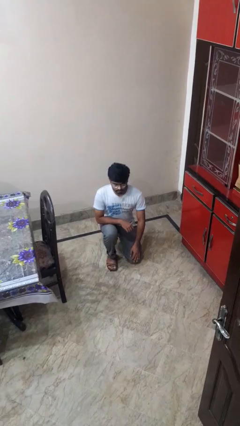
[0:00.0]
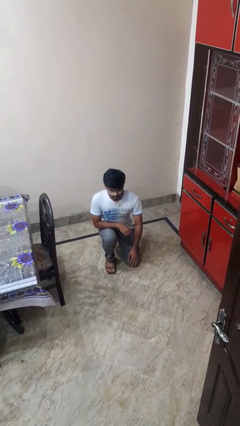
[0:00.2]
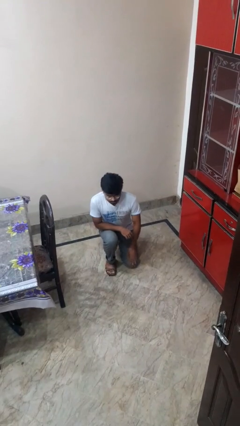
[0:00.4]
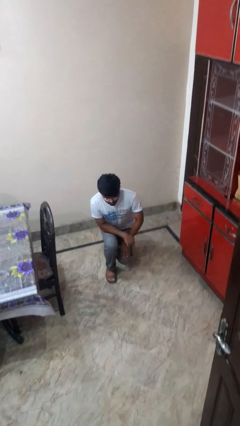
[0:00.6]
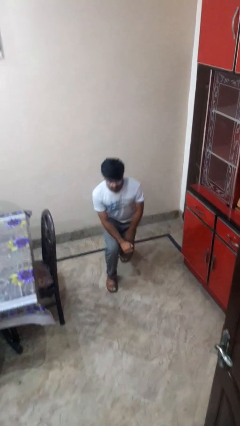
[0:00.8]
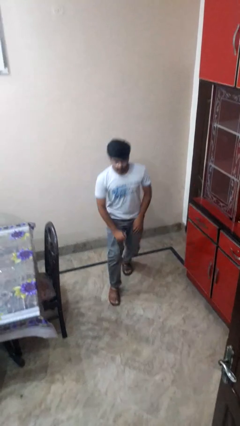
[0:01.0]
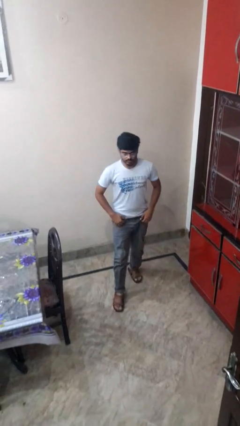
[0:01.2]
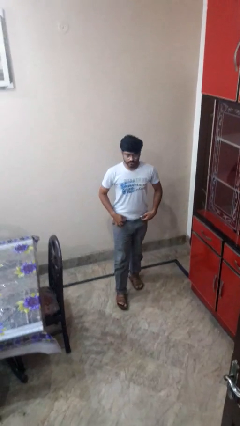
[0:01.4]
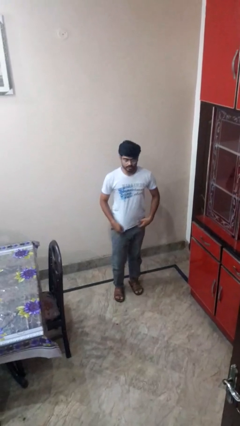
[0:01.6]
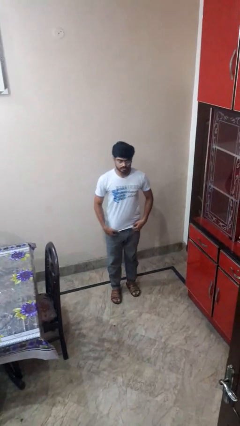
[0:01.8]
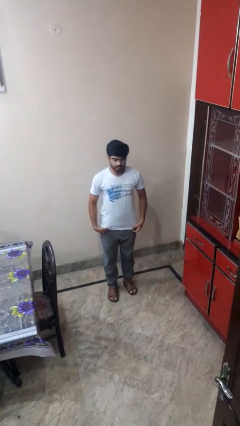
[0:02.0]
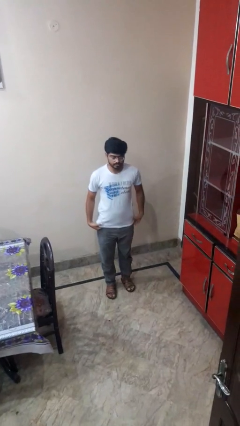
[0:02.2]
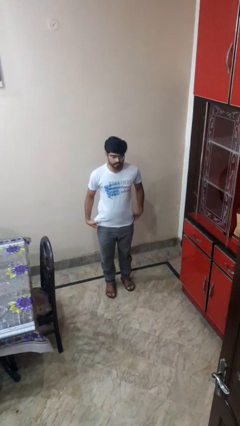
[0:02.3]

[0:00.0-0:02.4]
person stands up from floor

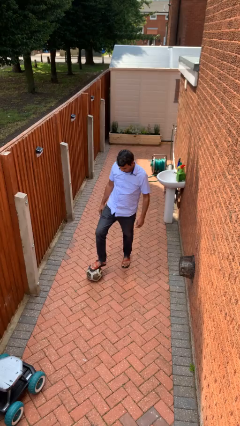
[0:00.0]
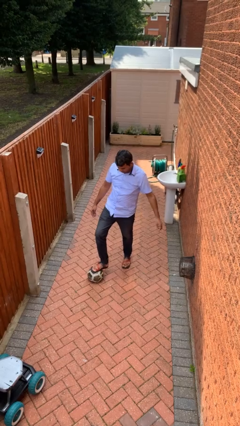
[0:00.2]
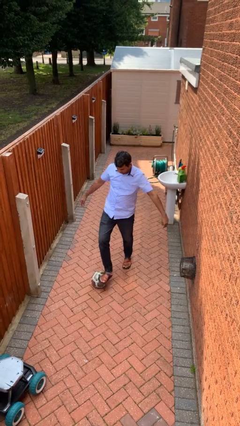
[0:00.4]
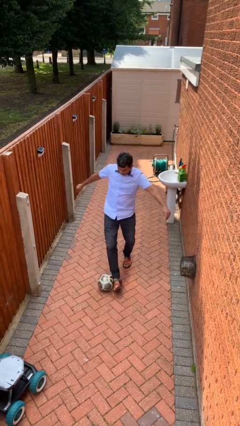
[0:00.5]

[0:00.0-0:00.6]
person trips on object on floor

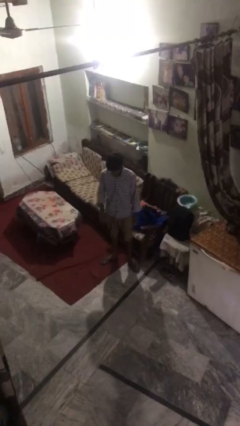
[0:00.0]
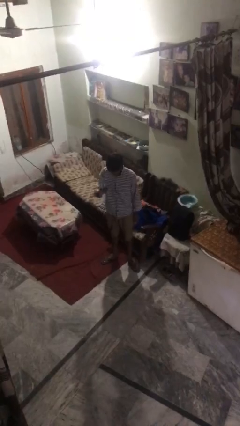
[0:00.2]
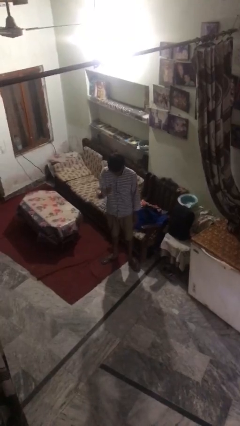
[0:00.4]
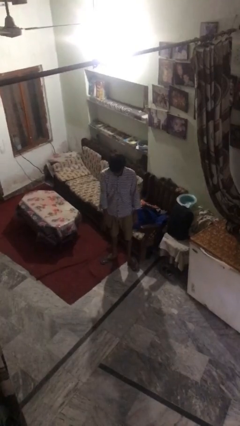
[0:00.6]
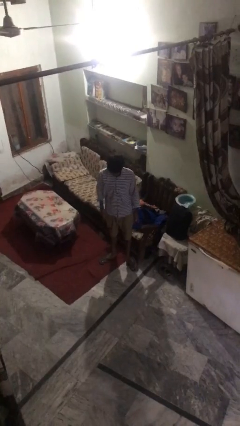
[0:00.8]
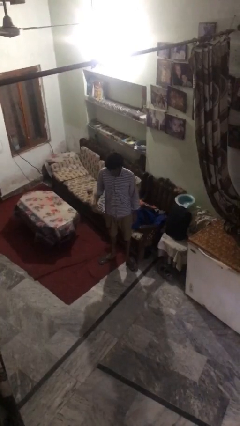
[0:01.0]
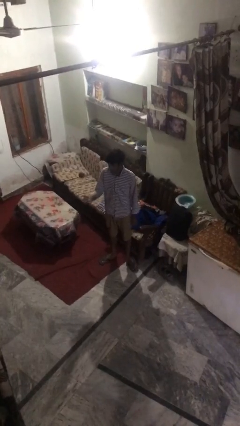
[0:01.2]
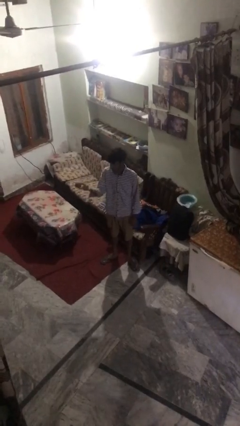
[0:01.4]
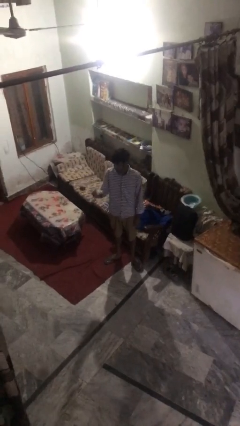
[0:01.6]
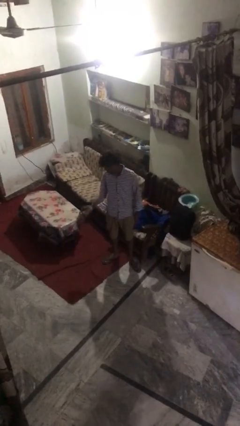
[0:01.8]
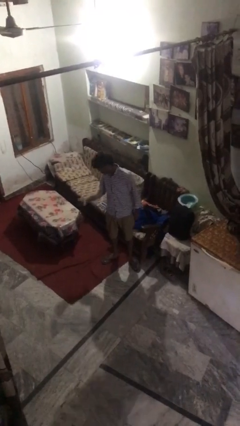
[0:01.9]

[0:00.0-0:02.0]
person bounces ball on floor

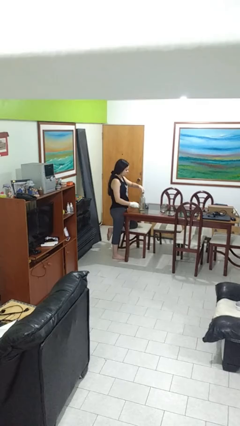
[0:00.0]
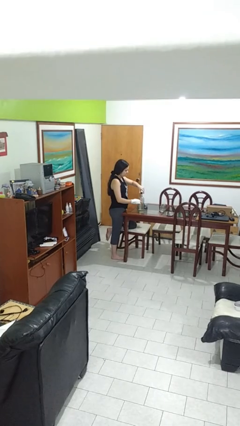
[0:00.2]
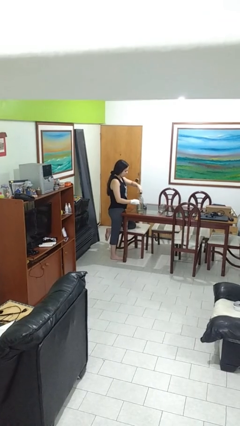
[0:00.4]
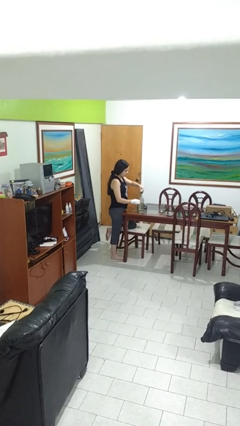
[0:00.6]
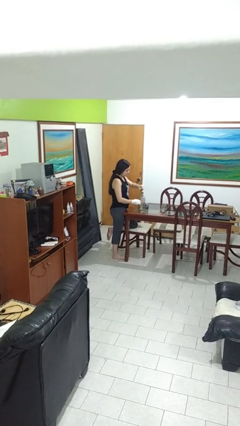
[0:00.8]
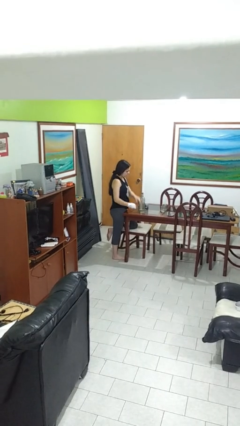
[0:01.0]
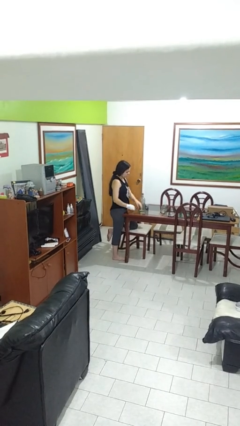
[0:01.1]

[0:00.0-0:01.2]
person unscrews lid from bottle

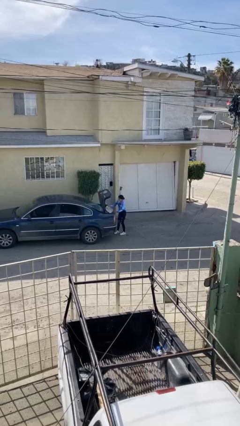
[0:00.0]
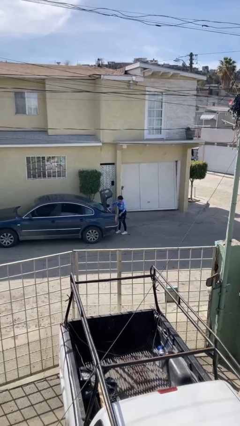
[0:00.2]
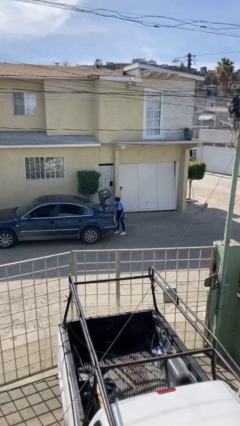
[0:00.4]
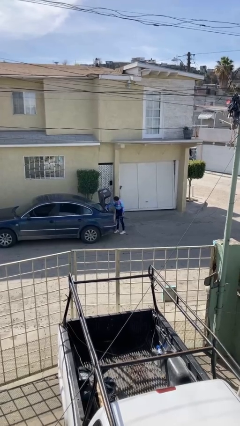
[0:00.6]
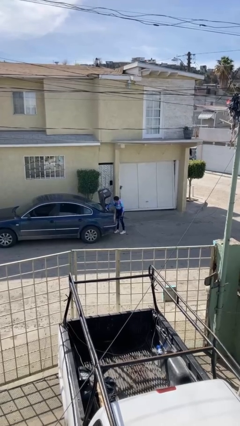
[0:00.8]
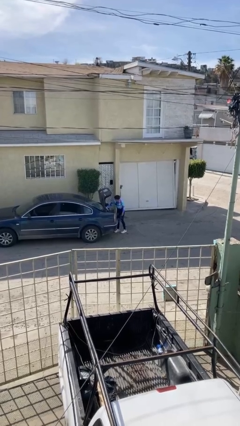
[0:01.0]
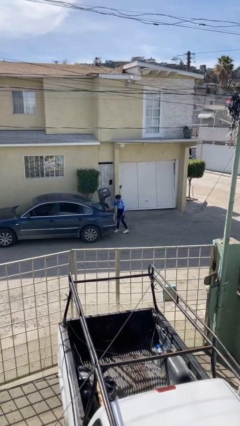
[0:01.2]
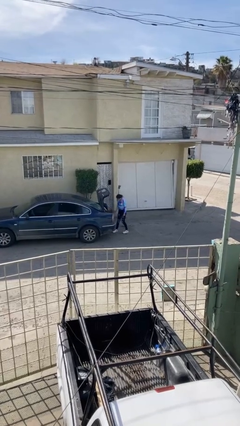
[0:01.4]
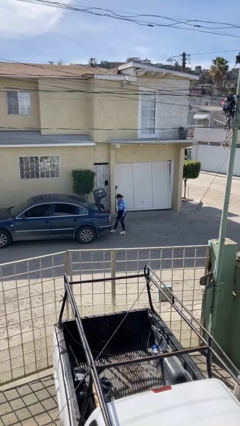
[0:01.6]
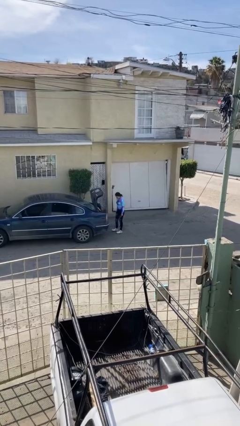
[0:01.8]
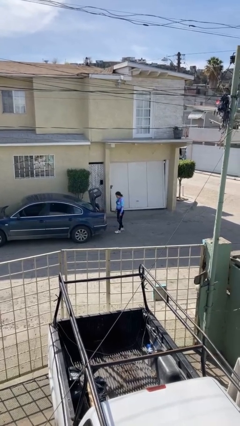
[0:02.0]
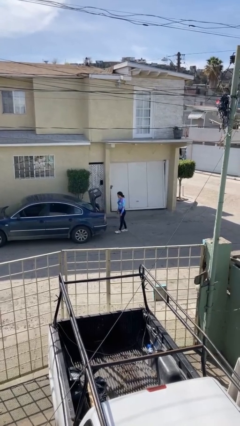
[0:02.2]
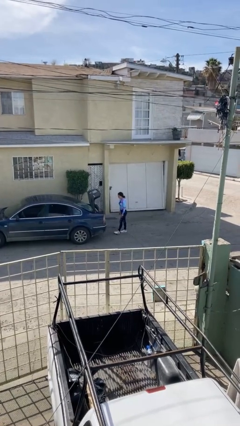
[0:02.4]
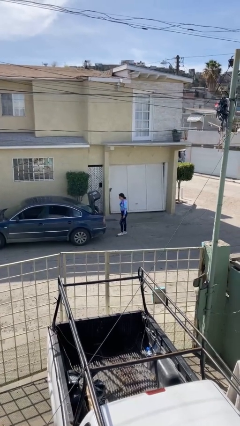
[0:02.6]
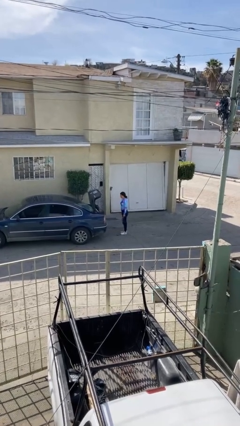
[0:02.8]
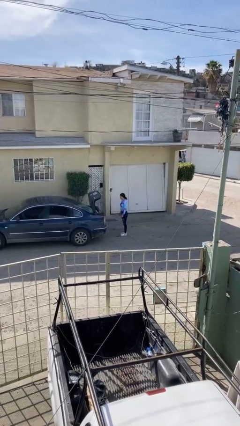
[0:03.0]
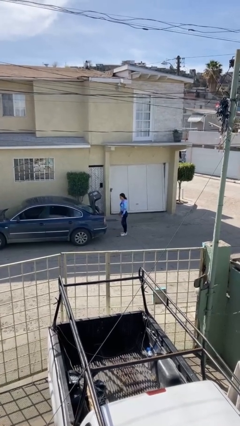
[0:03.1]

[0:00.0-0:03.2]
person loads car

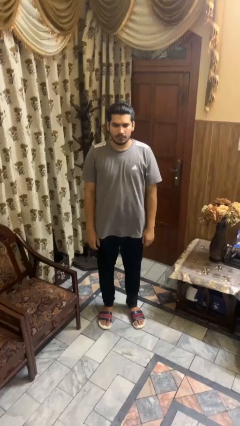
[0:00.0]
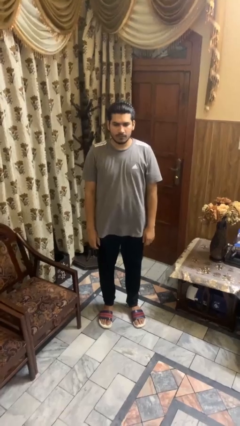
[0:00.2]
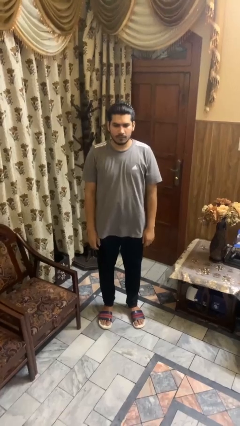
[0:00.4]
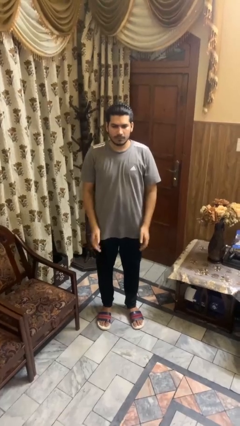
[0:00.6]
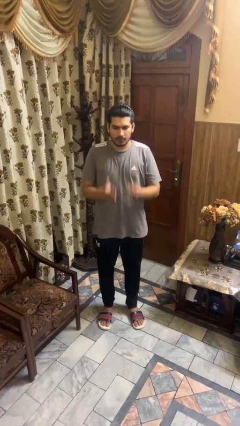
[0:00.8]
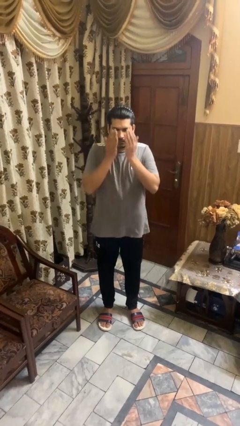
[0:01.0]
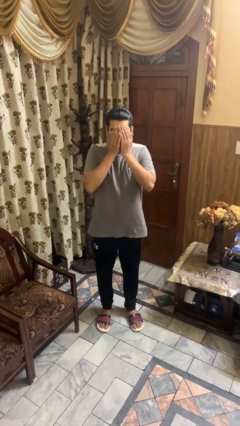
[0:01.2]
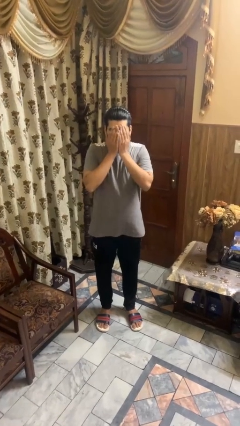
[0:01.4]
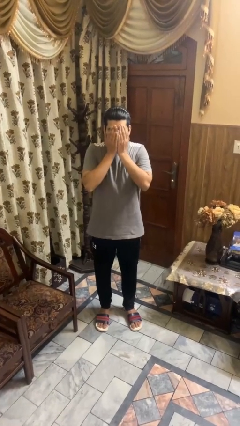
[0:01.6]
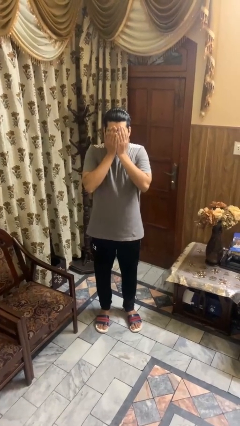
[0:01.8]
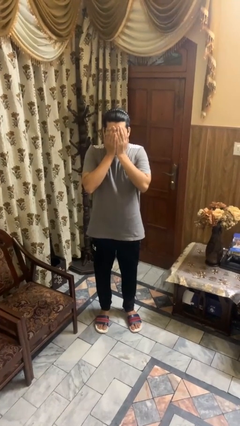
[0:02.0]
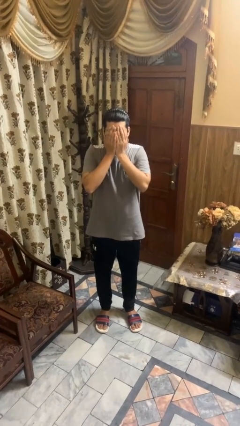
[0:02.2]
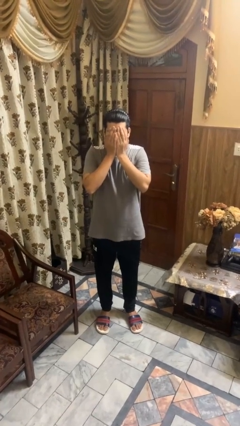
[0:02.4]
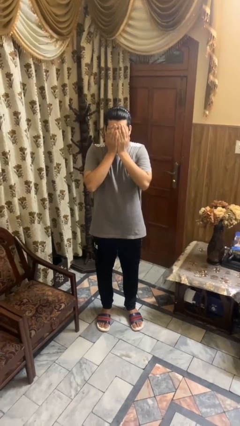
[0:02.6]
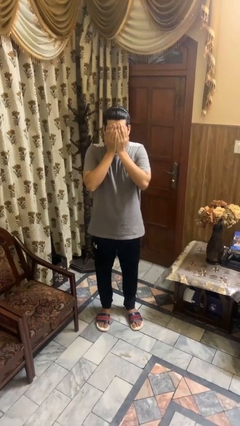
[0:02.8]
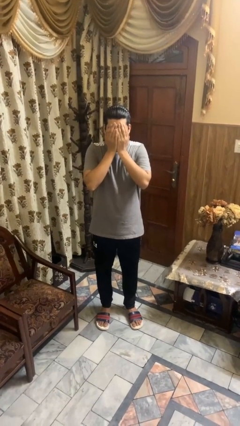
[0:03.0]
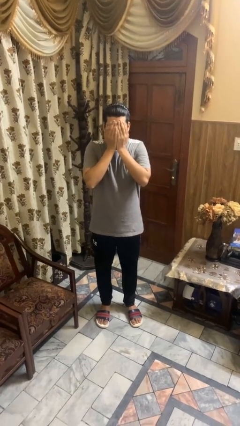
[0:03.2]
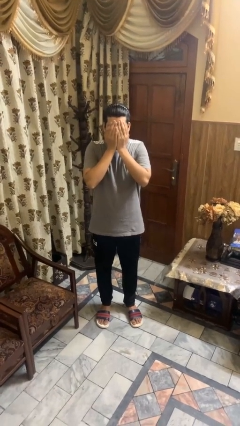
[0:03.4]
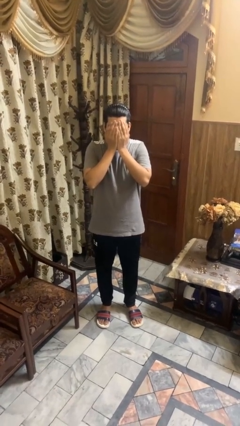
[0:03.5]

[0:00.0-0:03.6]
person covers face with hands

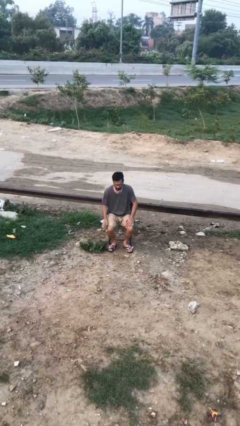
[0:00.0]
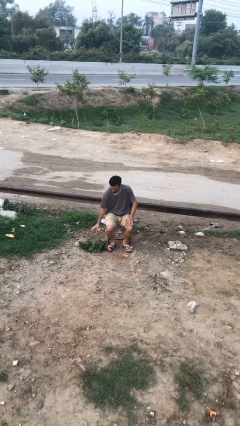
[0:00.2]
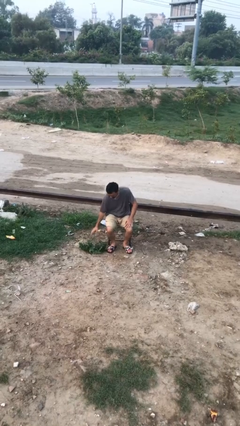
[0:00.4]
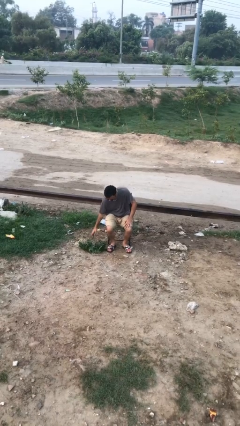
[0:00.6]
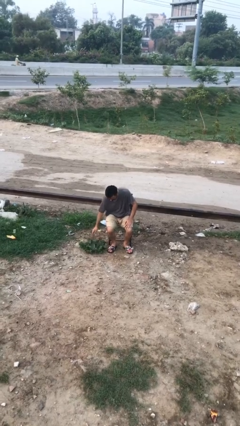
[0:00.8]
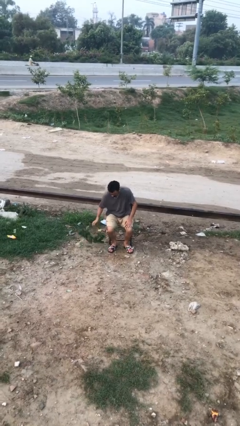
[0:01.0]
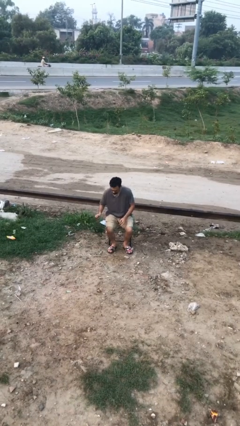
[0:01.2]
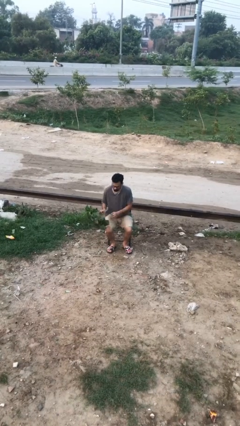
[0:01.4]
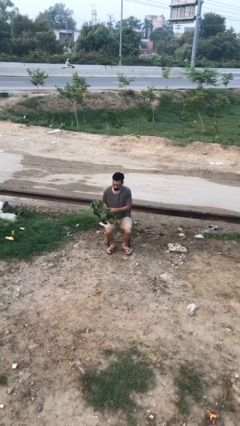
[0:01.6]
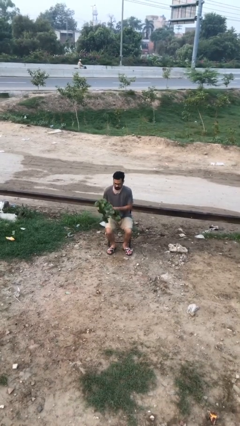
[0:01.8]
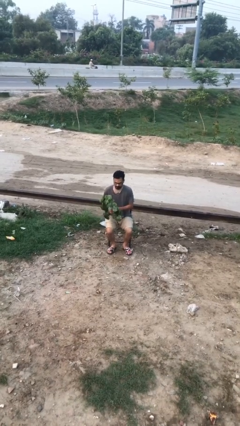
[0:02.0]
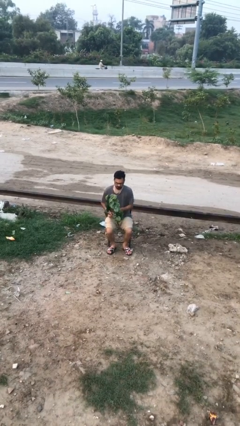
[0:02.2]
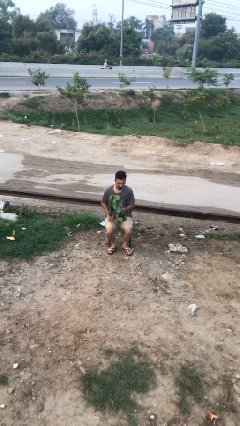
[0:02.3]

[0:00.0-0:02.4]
person picks up object from floor

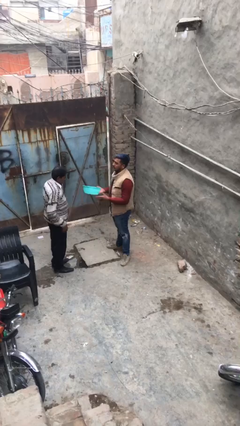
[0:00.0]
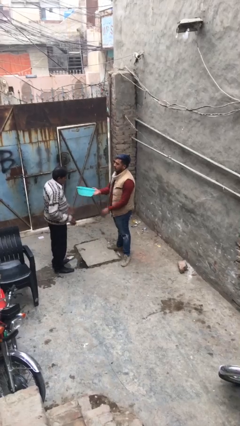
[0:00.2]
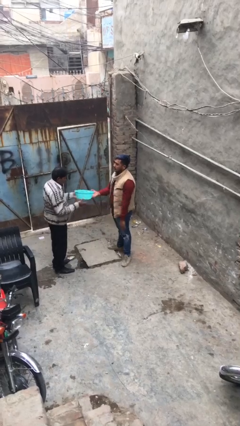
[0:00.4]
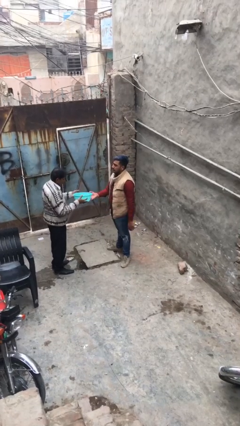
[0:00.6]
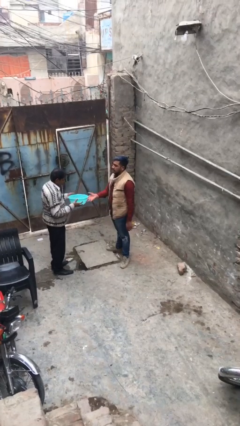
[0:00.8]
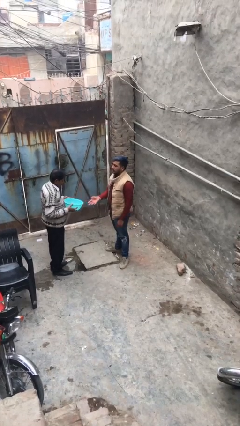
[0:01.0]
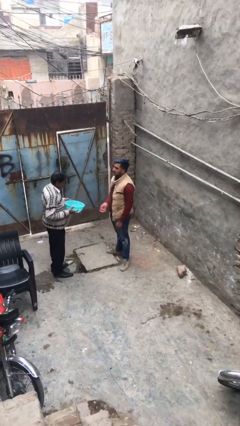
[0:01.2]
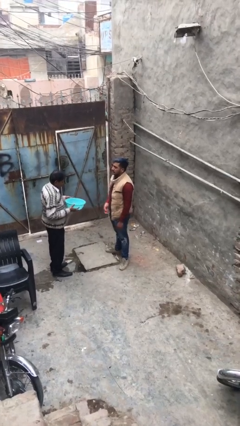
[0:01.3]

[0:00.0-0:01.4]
person transfers object to person

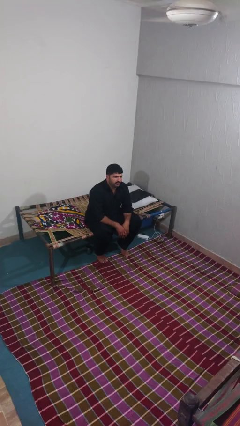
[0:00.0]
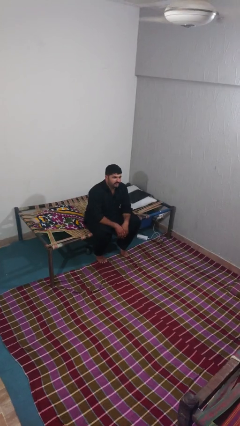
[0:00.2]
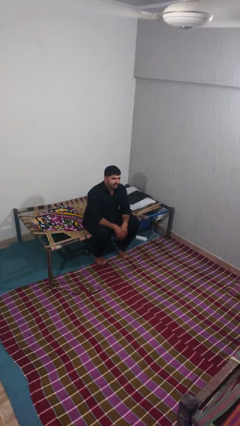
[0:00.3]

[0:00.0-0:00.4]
person waves at person
